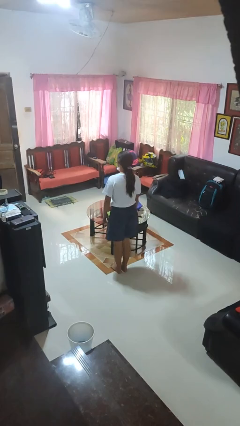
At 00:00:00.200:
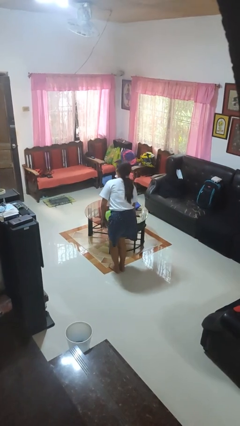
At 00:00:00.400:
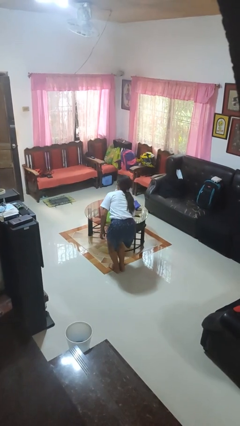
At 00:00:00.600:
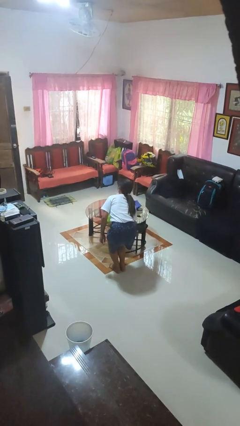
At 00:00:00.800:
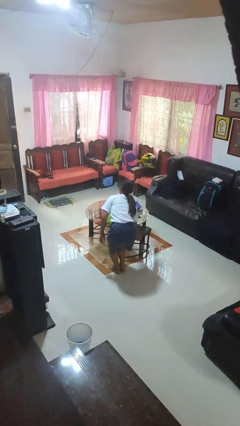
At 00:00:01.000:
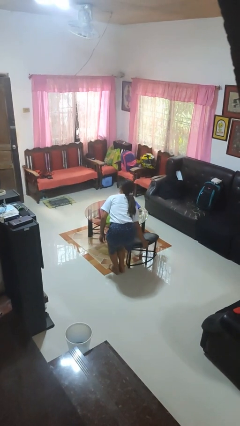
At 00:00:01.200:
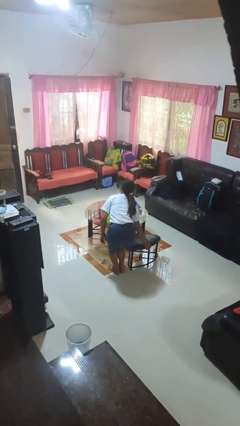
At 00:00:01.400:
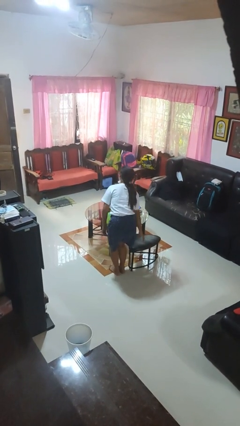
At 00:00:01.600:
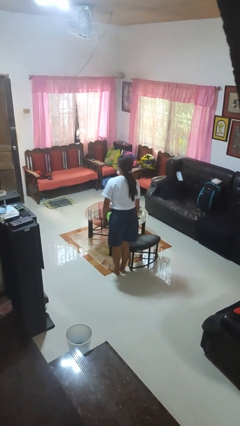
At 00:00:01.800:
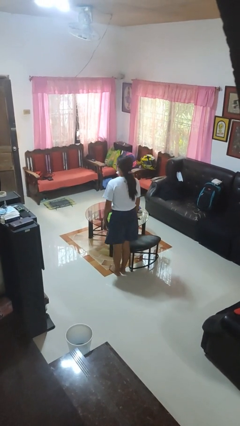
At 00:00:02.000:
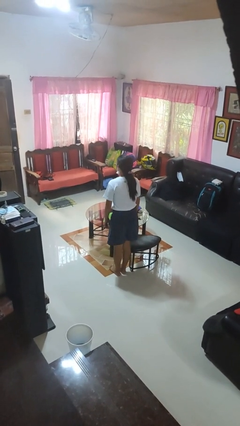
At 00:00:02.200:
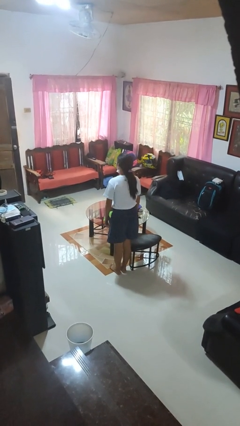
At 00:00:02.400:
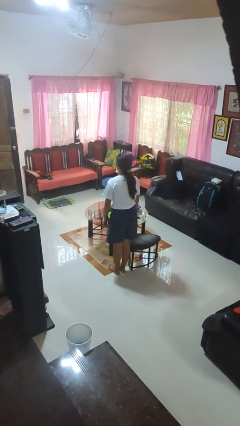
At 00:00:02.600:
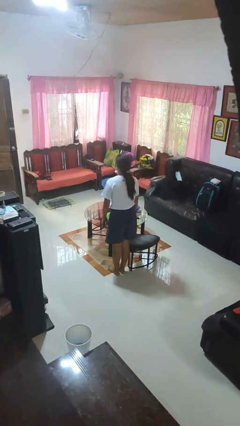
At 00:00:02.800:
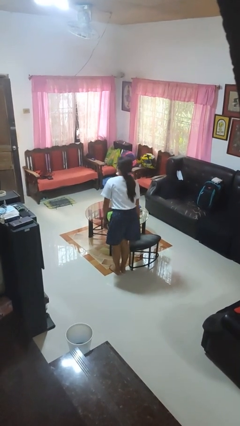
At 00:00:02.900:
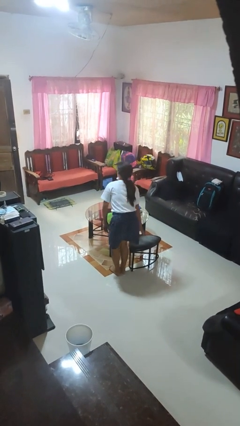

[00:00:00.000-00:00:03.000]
person pulls out chair

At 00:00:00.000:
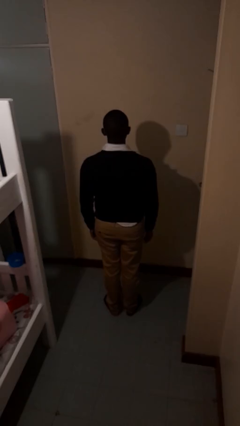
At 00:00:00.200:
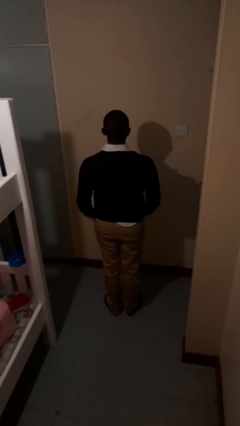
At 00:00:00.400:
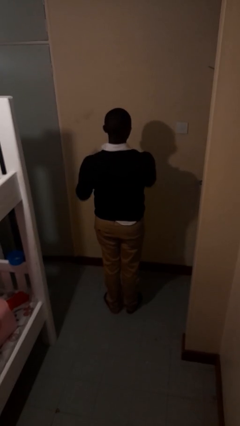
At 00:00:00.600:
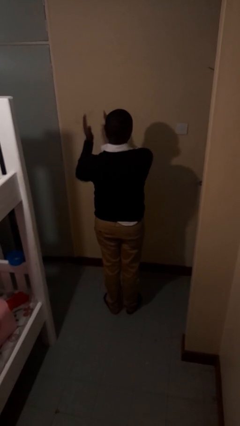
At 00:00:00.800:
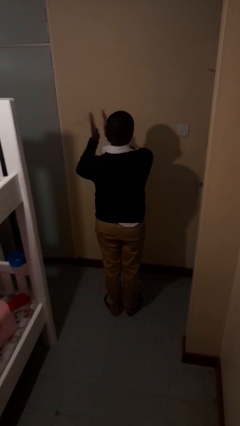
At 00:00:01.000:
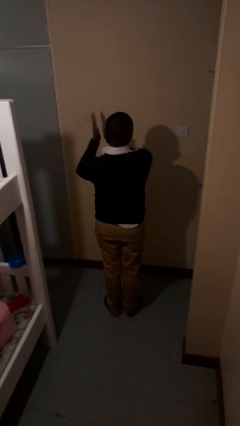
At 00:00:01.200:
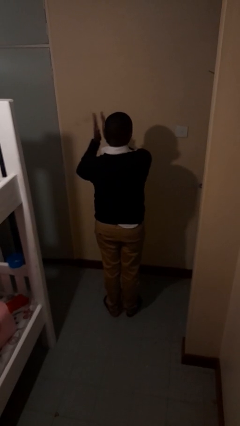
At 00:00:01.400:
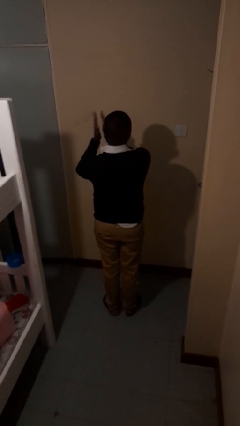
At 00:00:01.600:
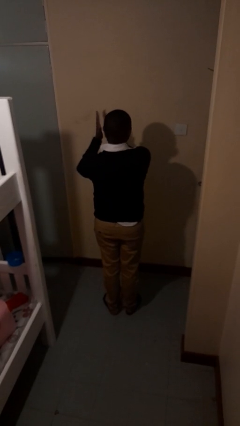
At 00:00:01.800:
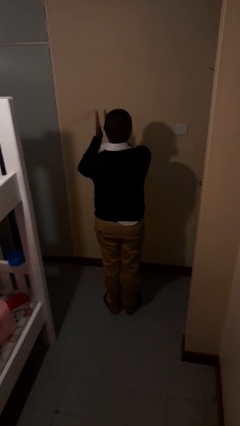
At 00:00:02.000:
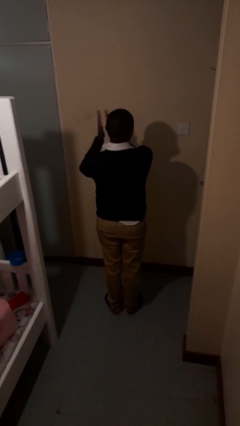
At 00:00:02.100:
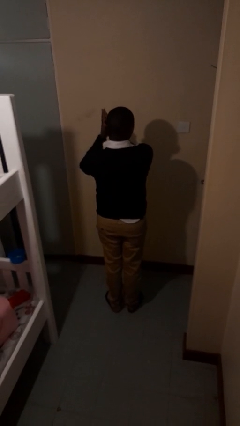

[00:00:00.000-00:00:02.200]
person claps hands

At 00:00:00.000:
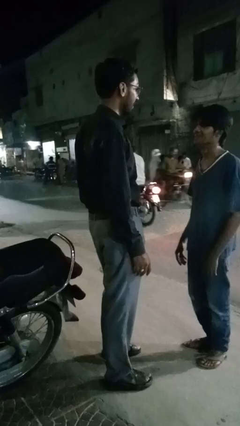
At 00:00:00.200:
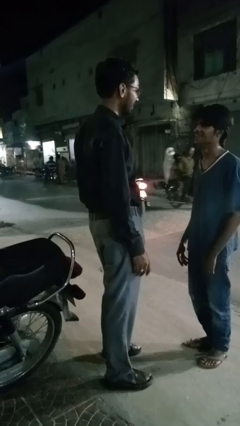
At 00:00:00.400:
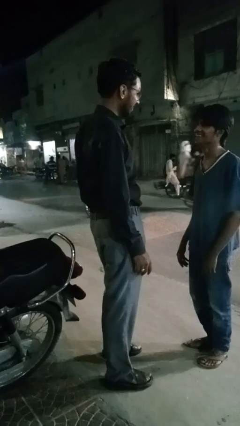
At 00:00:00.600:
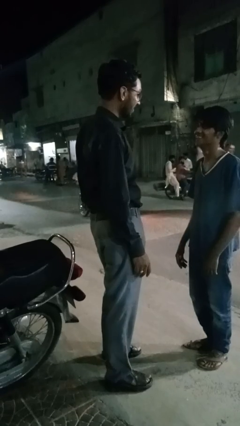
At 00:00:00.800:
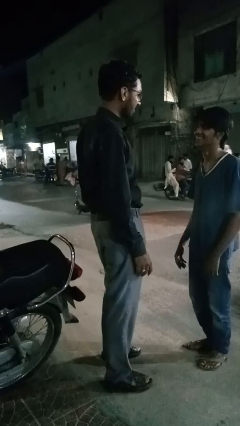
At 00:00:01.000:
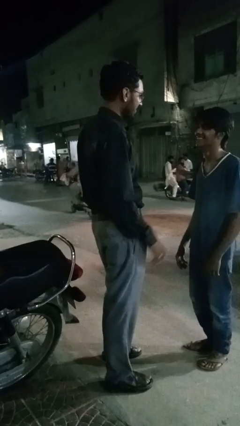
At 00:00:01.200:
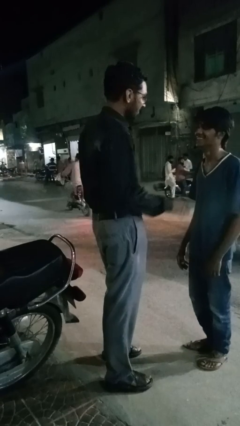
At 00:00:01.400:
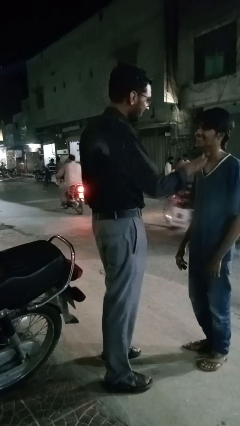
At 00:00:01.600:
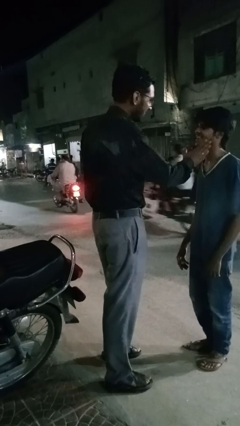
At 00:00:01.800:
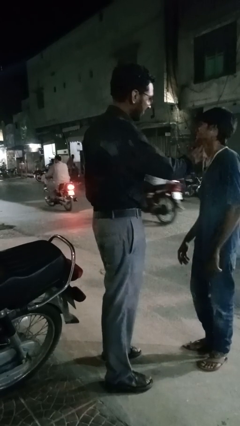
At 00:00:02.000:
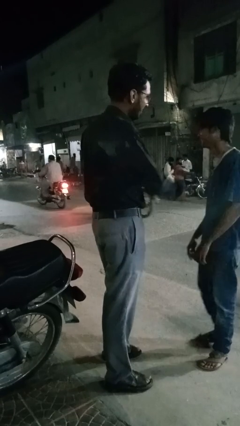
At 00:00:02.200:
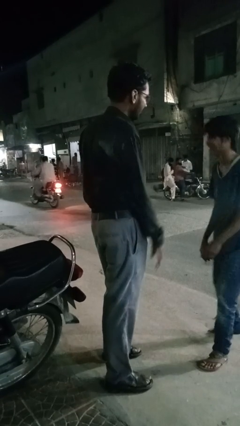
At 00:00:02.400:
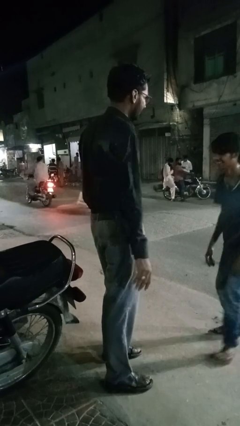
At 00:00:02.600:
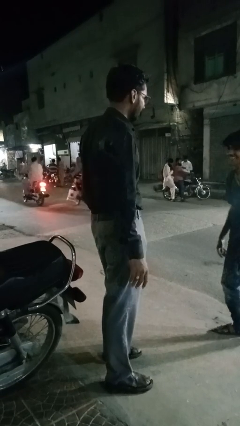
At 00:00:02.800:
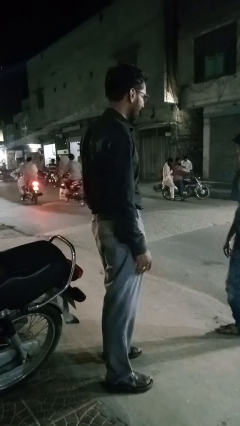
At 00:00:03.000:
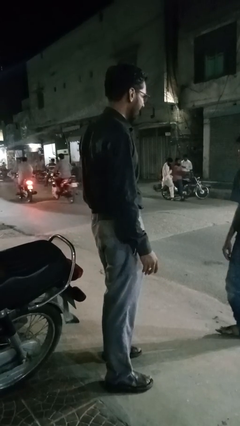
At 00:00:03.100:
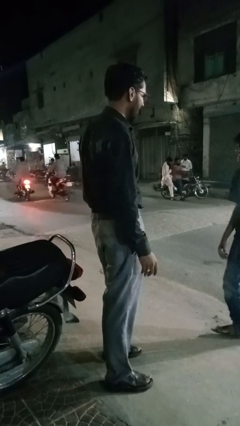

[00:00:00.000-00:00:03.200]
person shoves person

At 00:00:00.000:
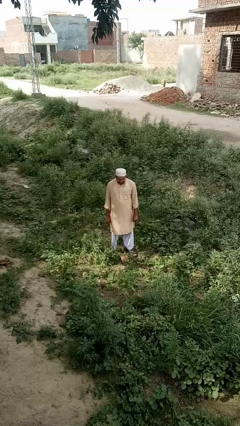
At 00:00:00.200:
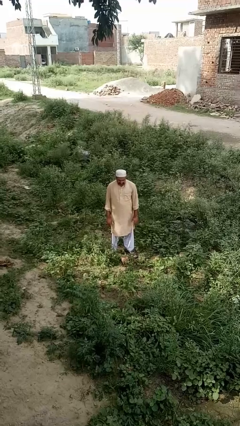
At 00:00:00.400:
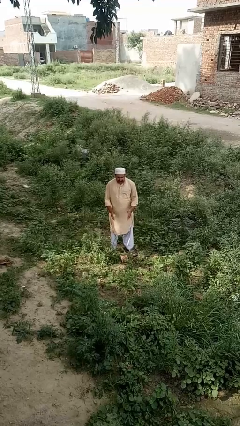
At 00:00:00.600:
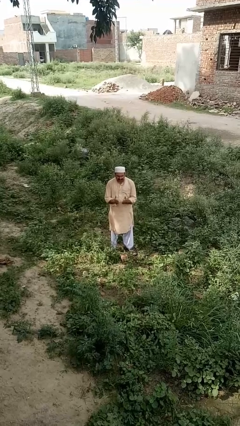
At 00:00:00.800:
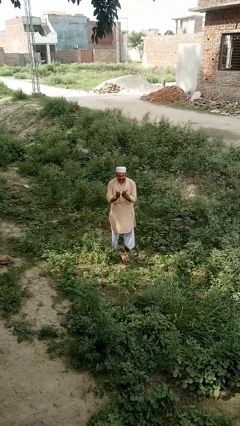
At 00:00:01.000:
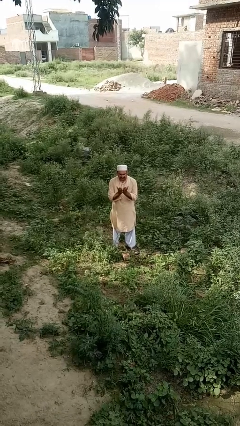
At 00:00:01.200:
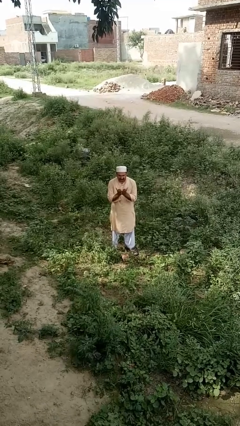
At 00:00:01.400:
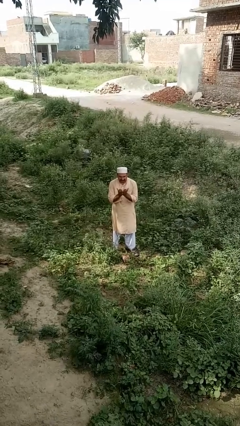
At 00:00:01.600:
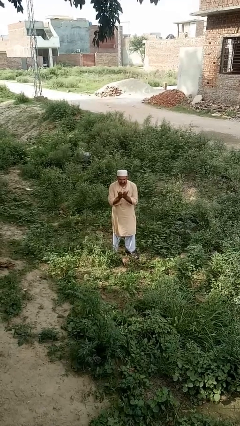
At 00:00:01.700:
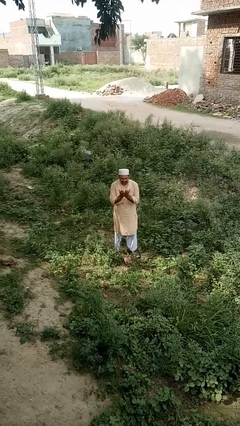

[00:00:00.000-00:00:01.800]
person prays

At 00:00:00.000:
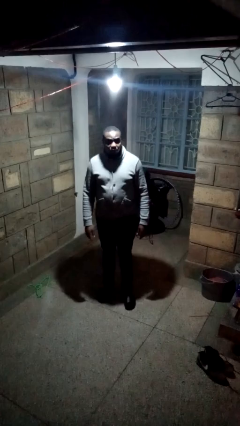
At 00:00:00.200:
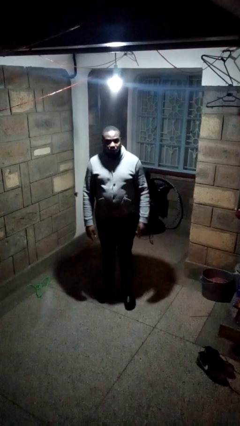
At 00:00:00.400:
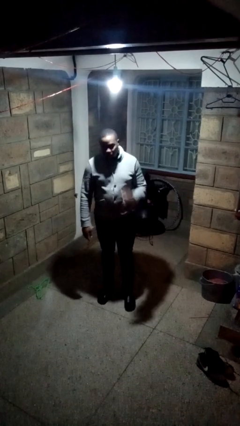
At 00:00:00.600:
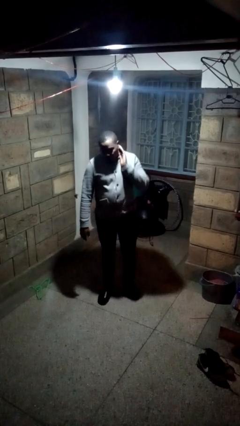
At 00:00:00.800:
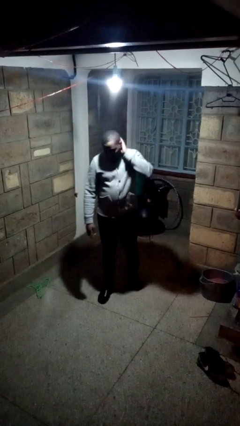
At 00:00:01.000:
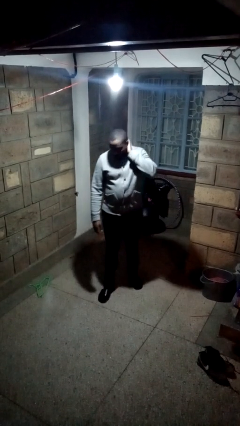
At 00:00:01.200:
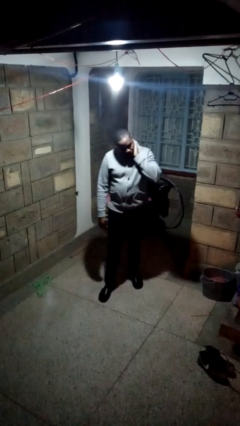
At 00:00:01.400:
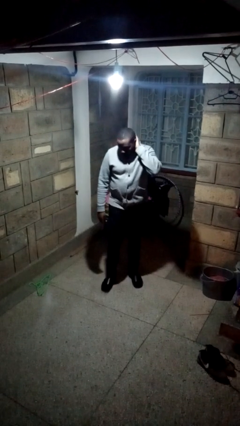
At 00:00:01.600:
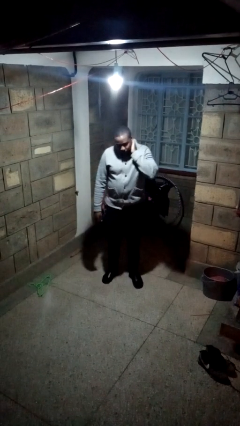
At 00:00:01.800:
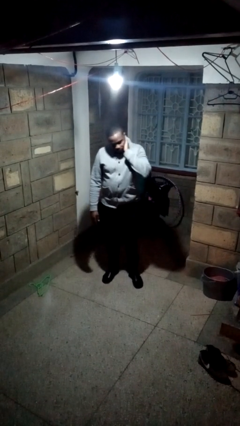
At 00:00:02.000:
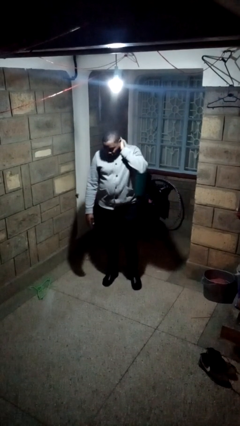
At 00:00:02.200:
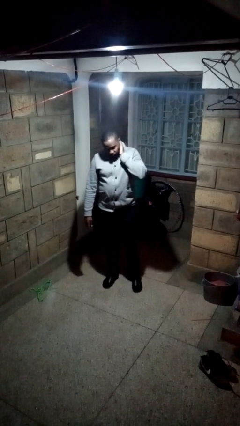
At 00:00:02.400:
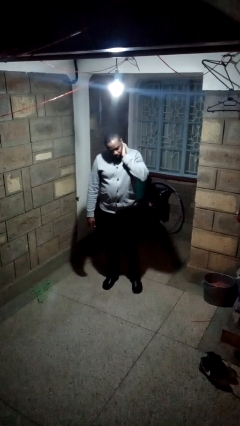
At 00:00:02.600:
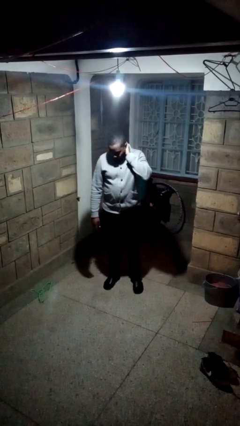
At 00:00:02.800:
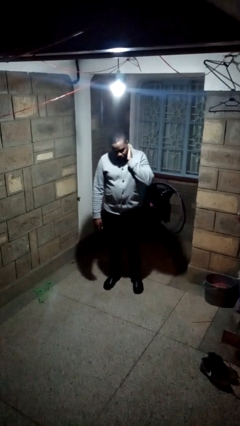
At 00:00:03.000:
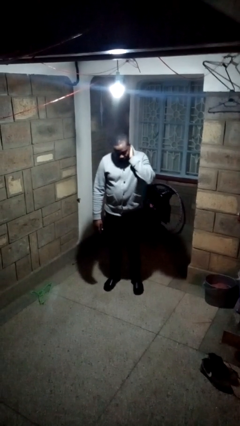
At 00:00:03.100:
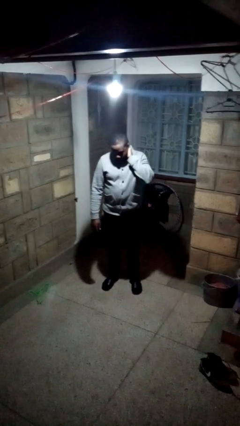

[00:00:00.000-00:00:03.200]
person rubs neck

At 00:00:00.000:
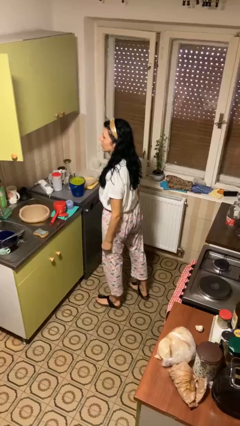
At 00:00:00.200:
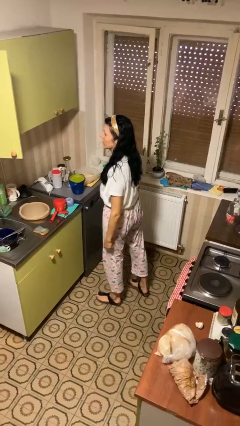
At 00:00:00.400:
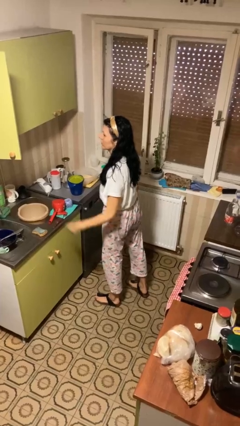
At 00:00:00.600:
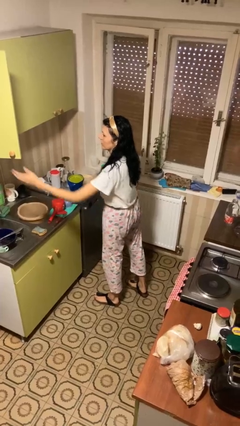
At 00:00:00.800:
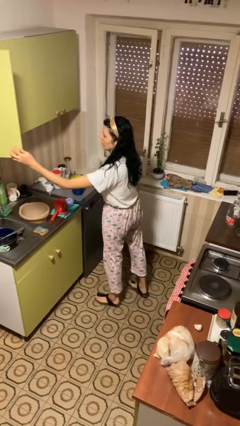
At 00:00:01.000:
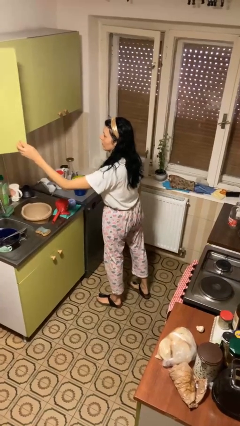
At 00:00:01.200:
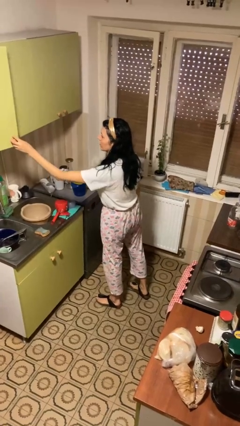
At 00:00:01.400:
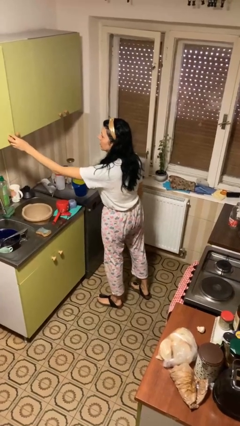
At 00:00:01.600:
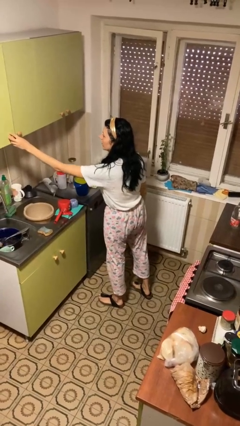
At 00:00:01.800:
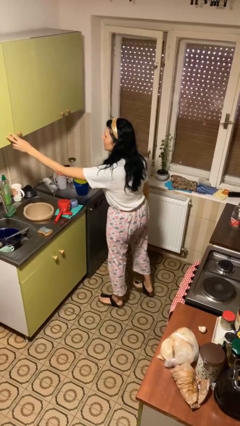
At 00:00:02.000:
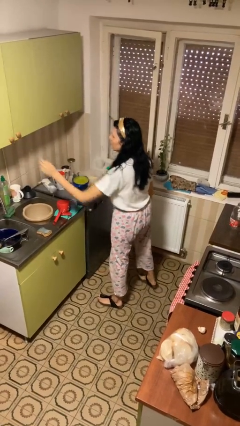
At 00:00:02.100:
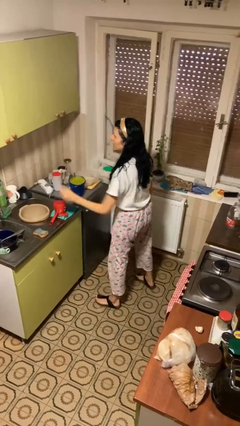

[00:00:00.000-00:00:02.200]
person closes cabinet

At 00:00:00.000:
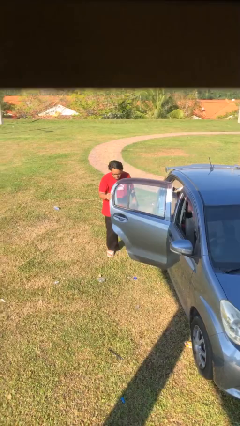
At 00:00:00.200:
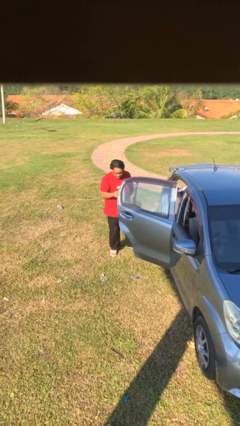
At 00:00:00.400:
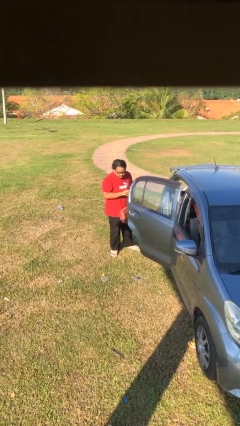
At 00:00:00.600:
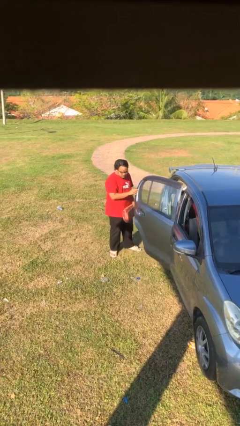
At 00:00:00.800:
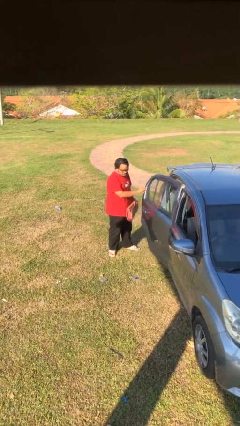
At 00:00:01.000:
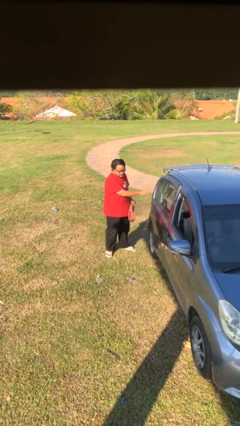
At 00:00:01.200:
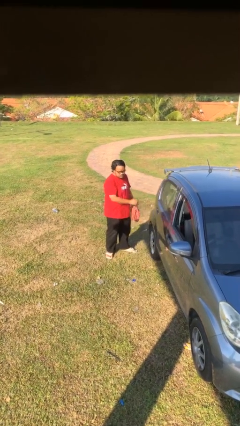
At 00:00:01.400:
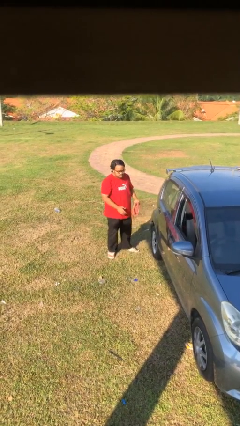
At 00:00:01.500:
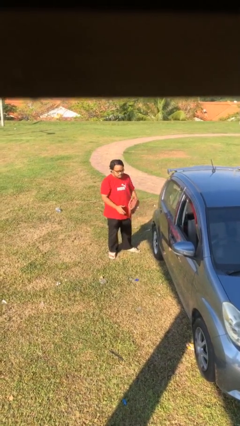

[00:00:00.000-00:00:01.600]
person closes car door
